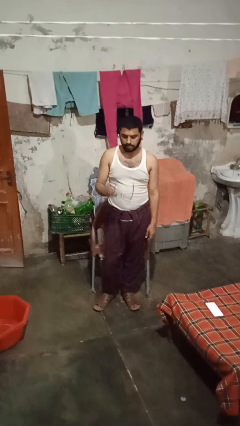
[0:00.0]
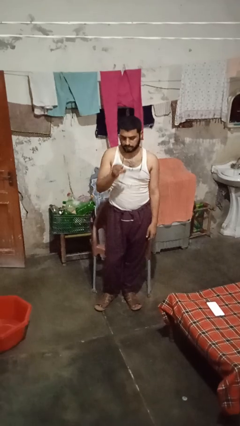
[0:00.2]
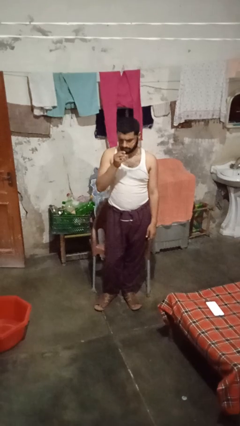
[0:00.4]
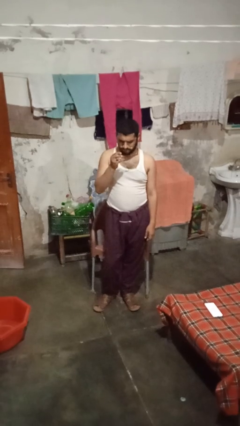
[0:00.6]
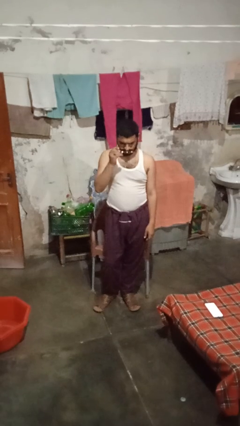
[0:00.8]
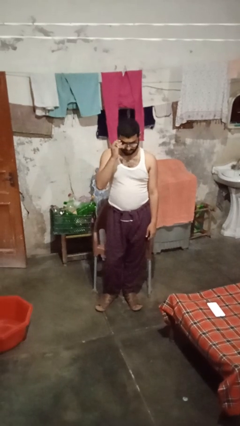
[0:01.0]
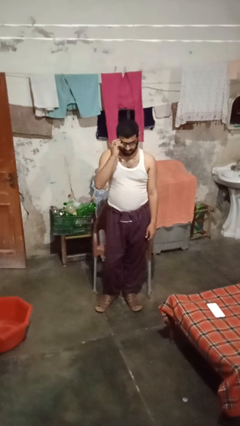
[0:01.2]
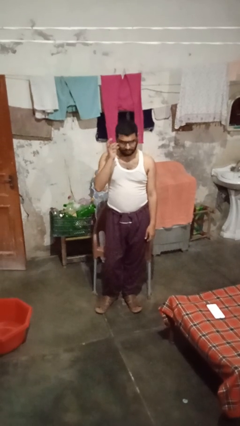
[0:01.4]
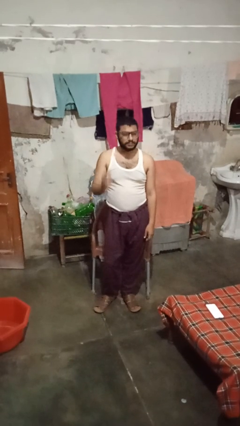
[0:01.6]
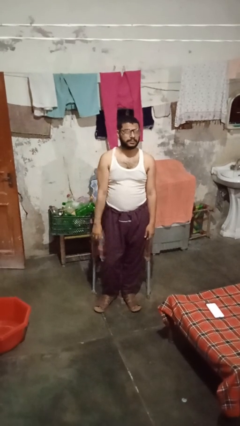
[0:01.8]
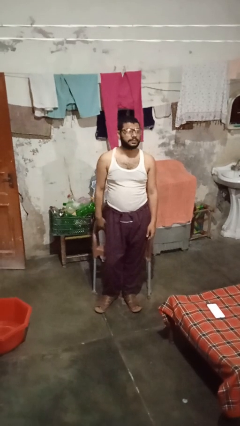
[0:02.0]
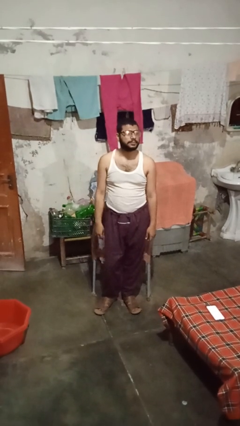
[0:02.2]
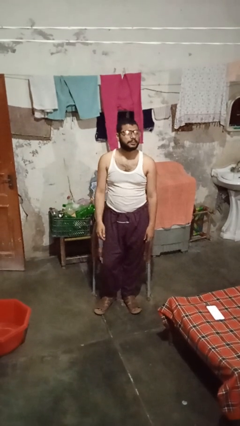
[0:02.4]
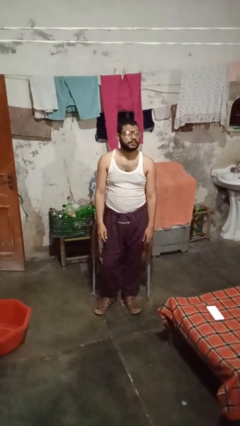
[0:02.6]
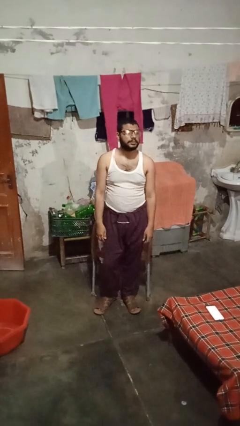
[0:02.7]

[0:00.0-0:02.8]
person puts on glasses

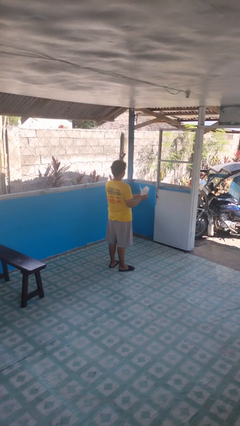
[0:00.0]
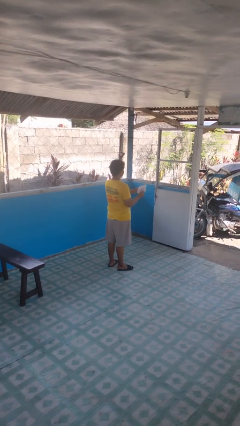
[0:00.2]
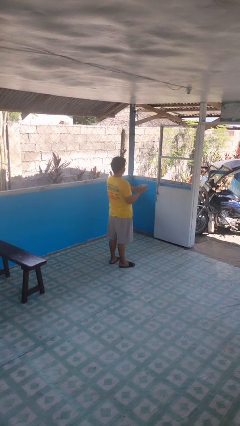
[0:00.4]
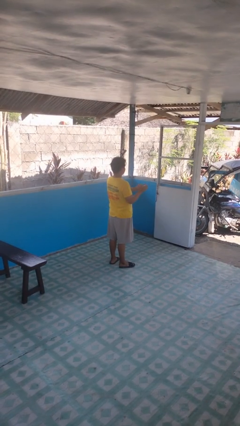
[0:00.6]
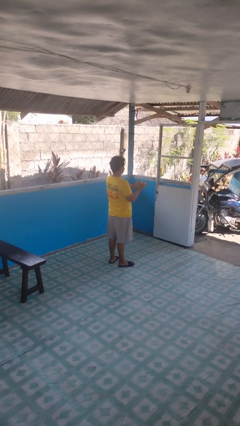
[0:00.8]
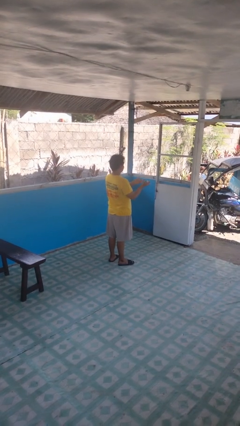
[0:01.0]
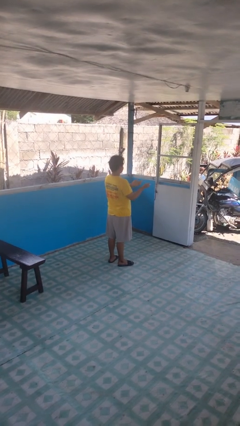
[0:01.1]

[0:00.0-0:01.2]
person crumples paper

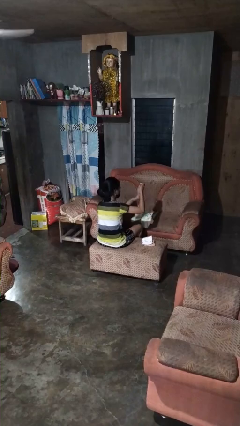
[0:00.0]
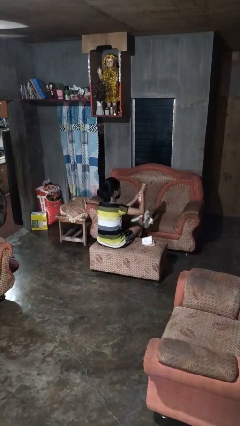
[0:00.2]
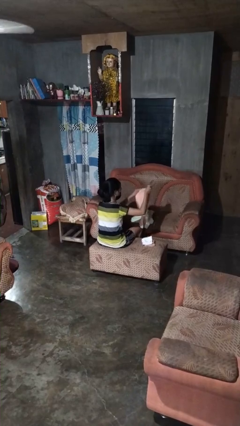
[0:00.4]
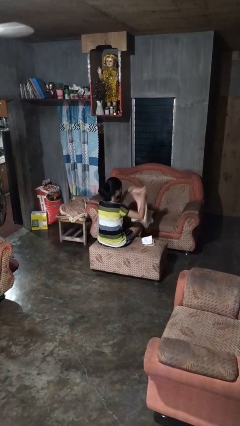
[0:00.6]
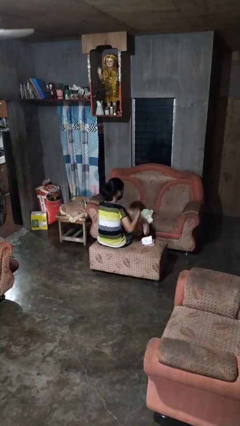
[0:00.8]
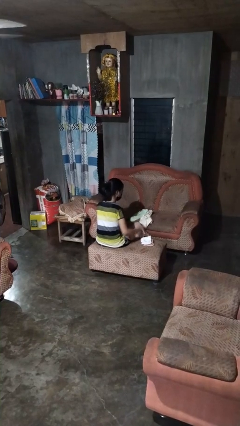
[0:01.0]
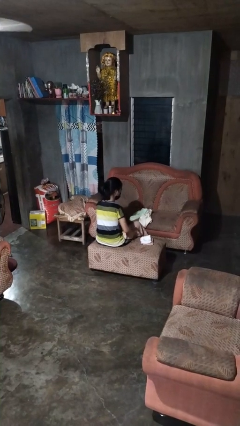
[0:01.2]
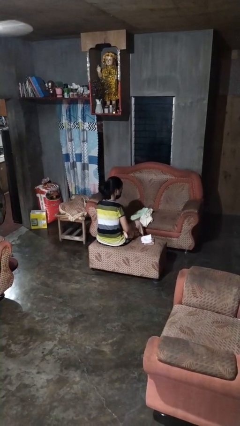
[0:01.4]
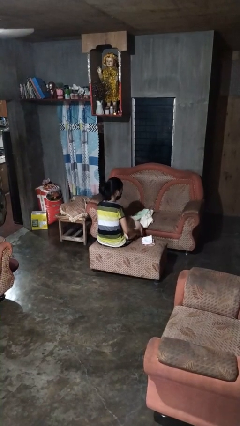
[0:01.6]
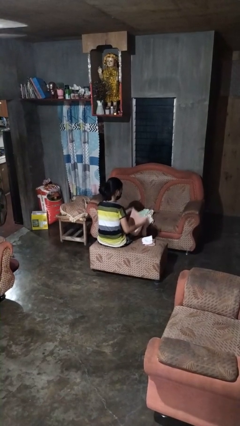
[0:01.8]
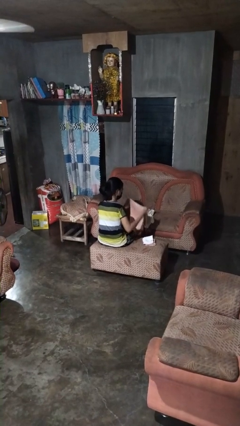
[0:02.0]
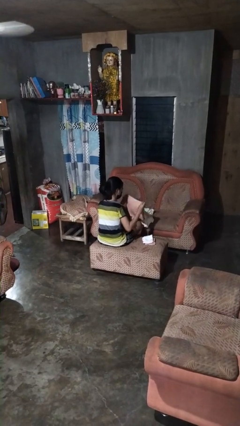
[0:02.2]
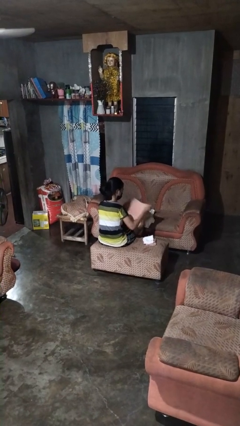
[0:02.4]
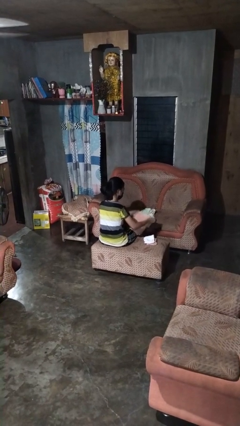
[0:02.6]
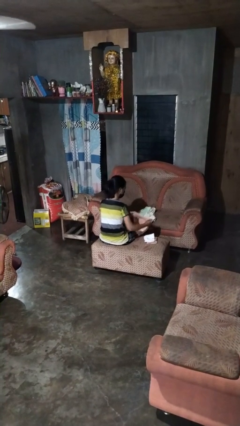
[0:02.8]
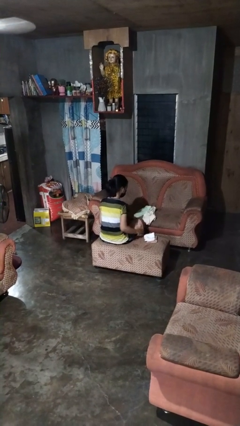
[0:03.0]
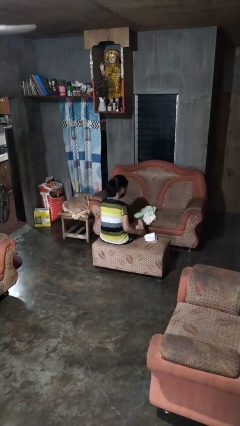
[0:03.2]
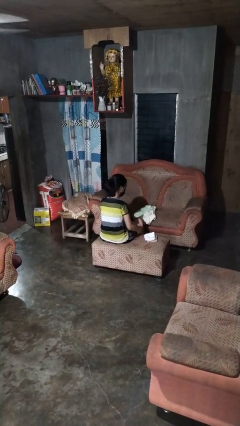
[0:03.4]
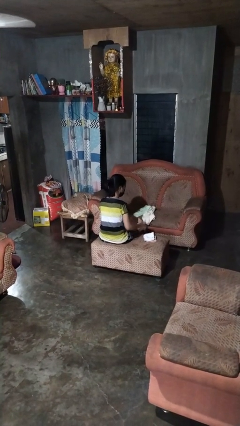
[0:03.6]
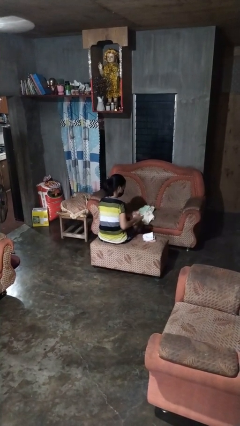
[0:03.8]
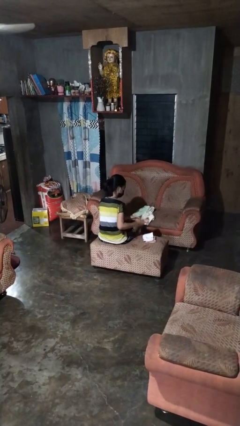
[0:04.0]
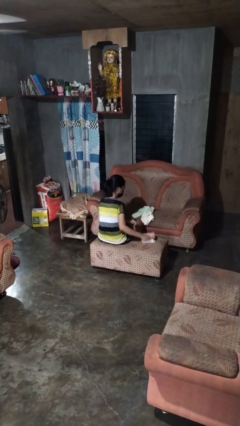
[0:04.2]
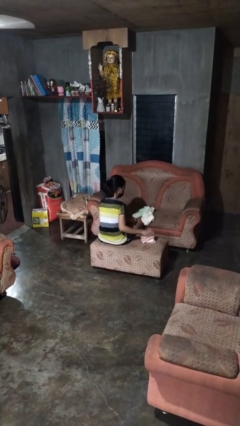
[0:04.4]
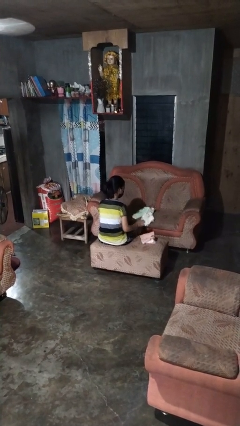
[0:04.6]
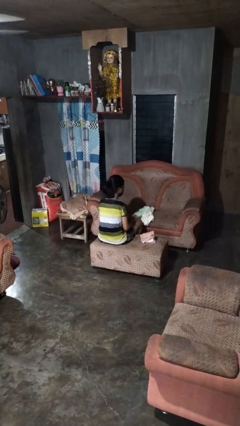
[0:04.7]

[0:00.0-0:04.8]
person folds towel

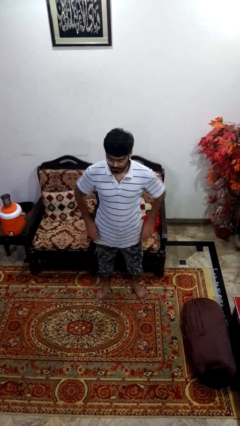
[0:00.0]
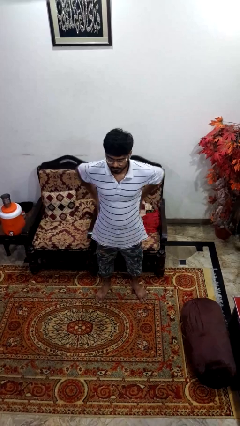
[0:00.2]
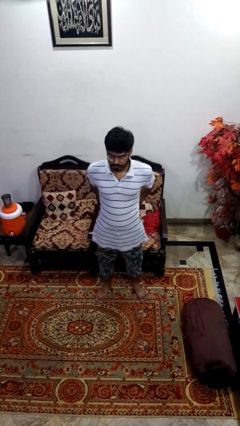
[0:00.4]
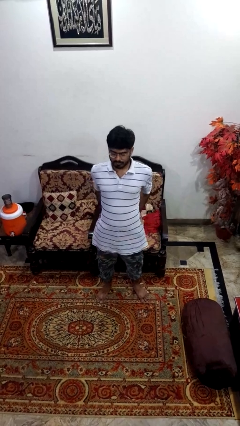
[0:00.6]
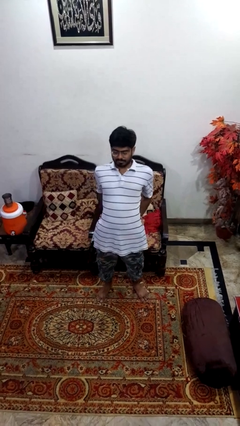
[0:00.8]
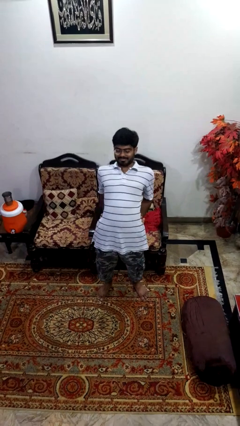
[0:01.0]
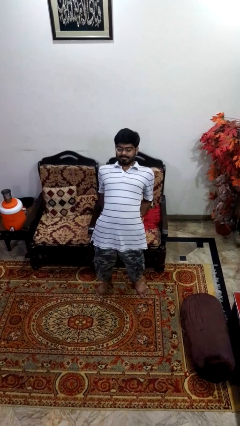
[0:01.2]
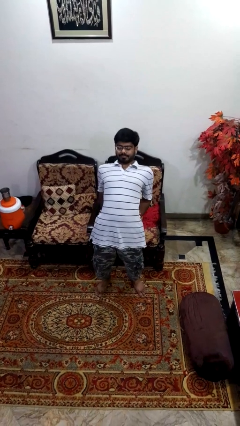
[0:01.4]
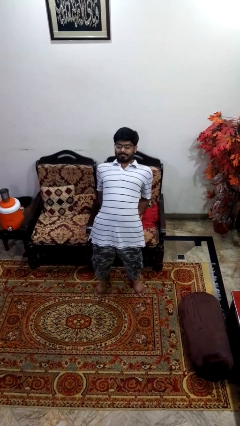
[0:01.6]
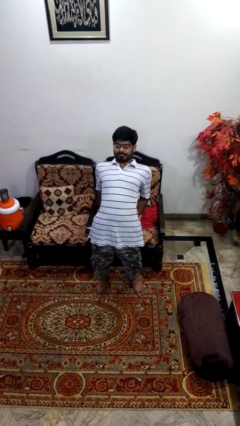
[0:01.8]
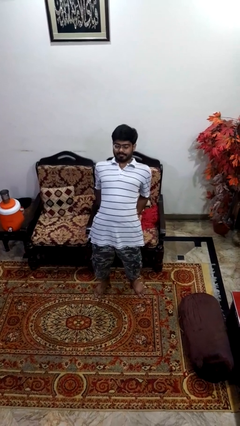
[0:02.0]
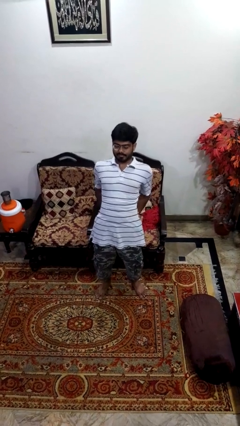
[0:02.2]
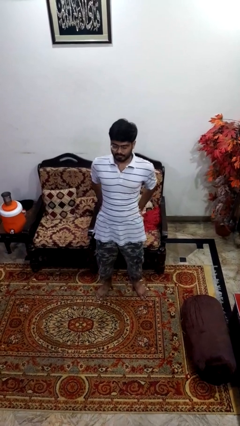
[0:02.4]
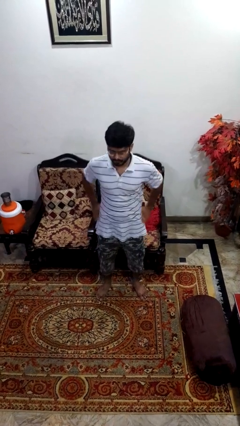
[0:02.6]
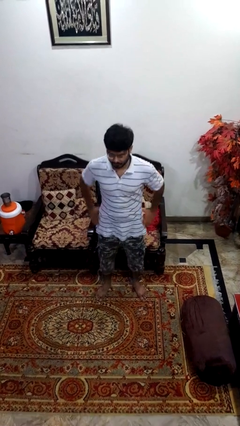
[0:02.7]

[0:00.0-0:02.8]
person stretches back

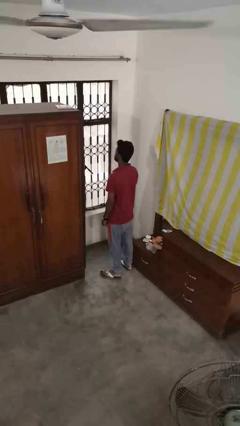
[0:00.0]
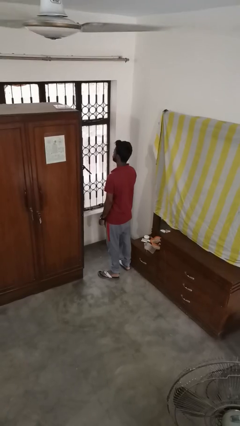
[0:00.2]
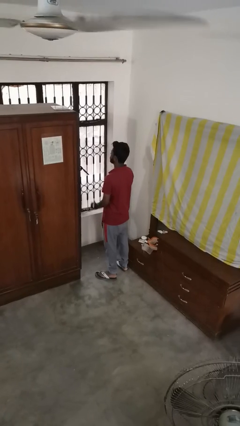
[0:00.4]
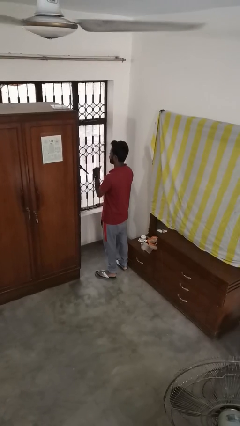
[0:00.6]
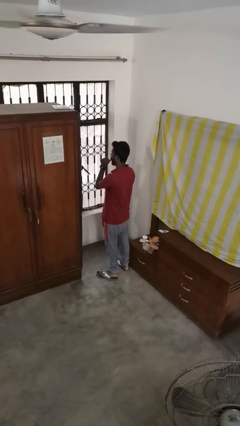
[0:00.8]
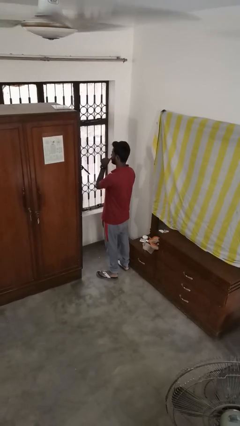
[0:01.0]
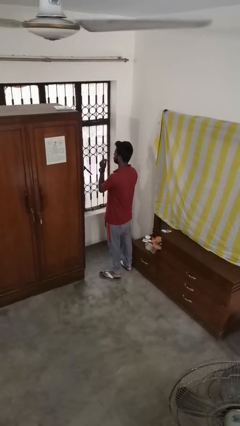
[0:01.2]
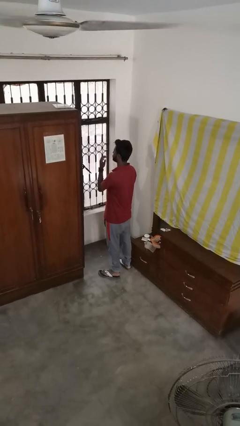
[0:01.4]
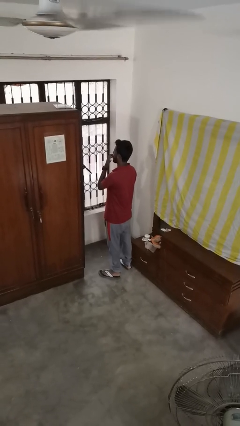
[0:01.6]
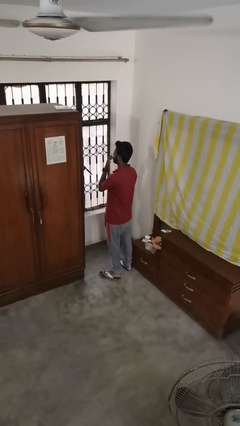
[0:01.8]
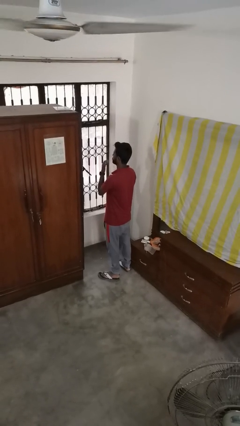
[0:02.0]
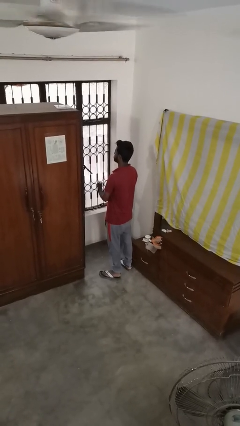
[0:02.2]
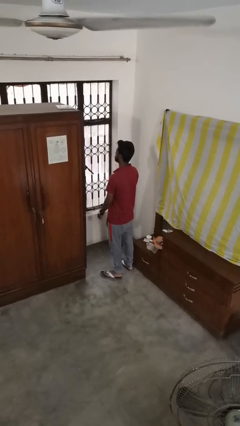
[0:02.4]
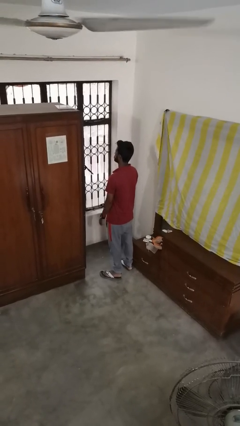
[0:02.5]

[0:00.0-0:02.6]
person licks fingers

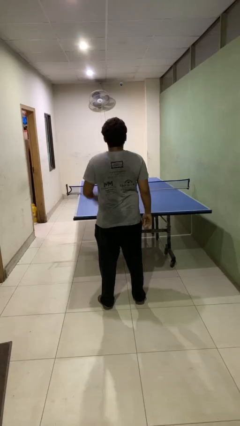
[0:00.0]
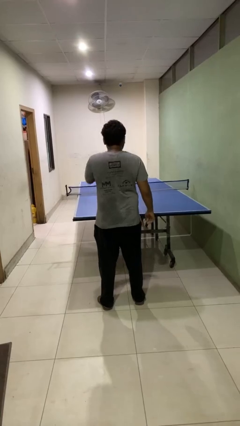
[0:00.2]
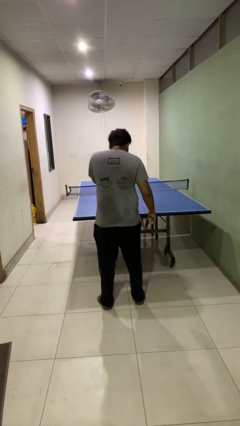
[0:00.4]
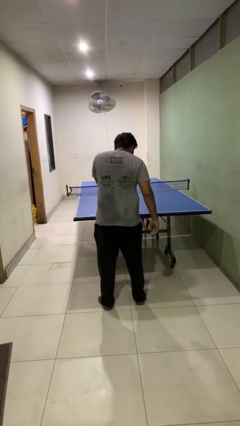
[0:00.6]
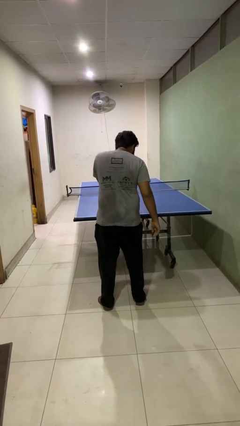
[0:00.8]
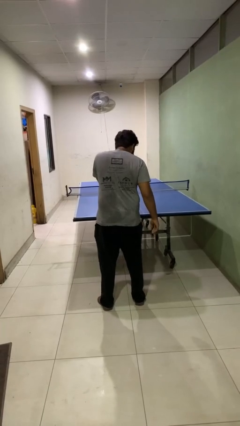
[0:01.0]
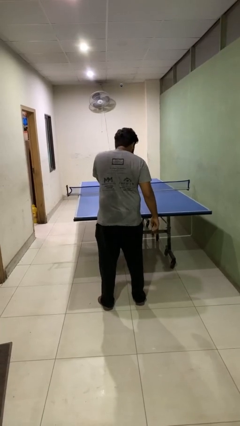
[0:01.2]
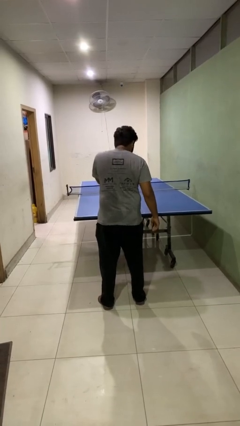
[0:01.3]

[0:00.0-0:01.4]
person sneezes into hand

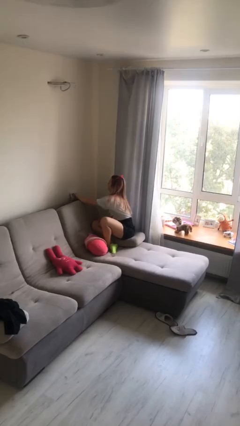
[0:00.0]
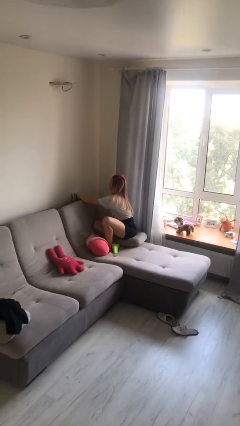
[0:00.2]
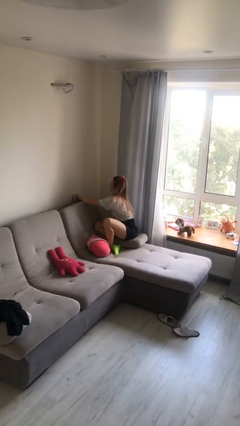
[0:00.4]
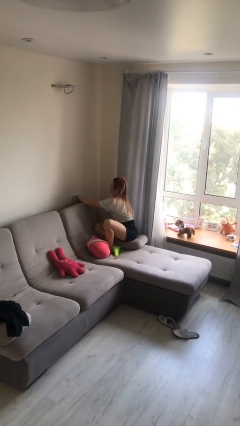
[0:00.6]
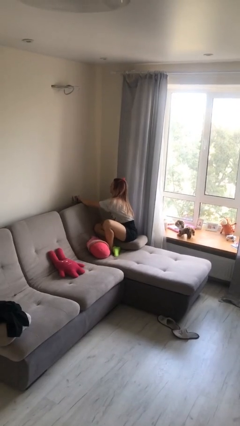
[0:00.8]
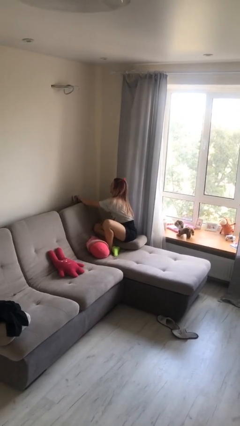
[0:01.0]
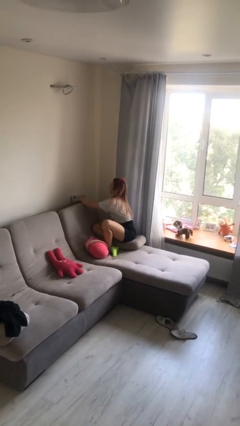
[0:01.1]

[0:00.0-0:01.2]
person adjusts thermostat
